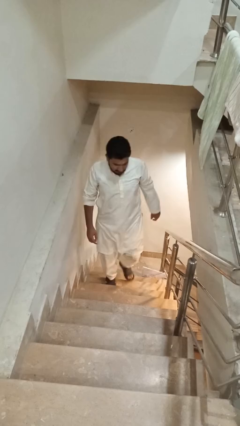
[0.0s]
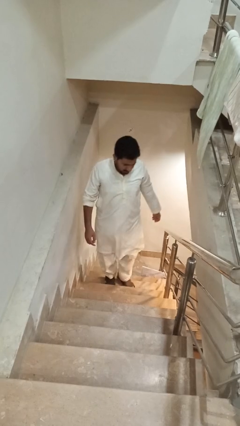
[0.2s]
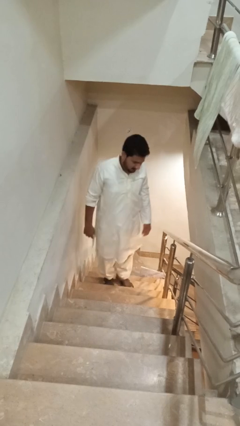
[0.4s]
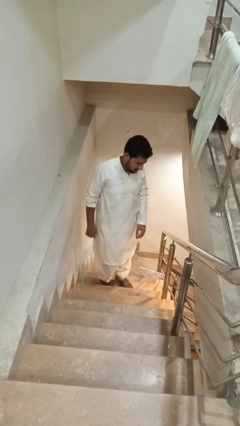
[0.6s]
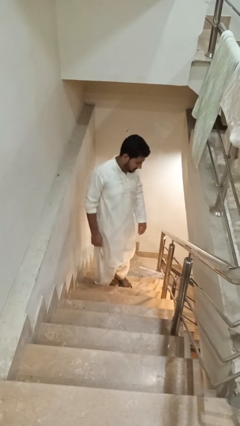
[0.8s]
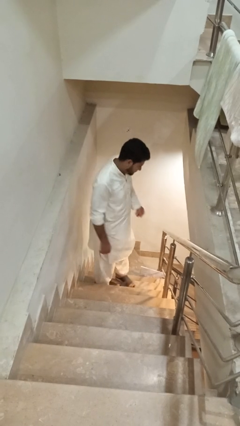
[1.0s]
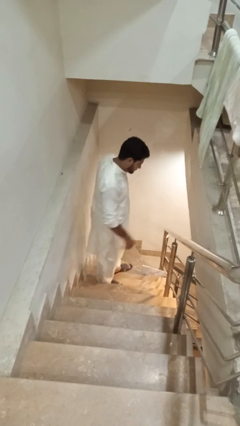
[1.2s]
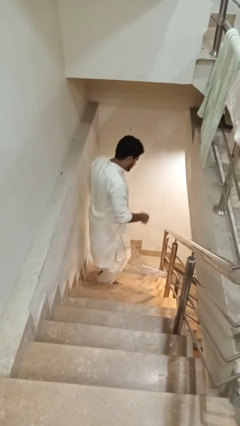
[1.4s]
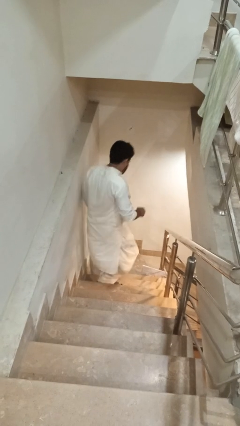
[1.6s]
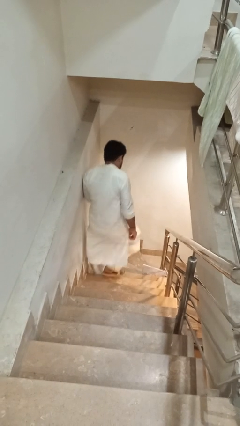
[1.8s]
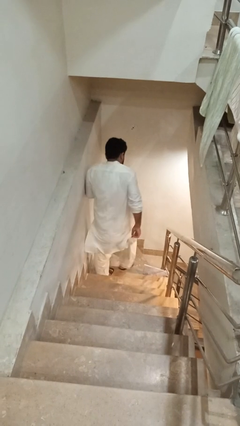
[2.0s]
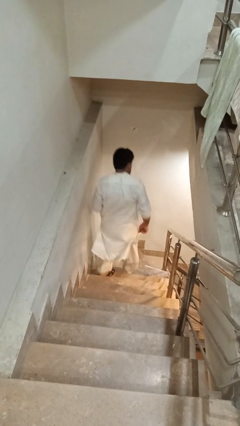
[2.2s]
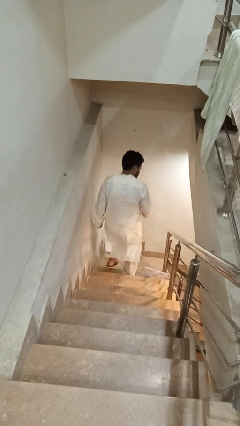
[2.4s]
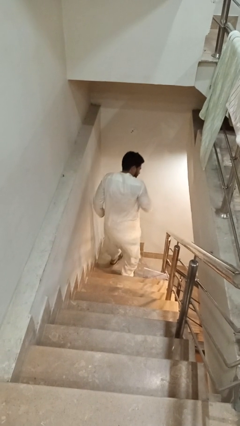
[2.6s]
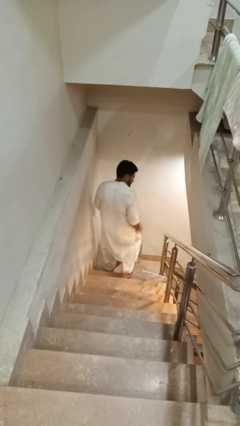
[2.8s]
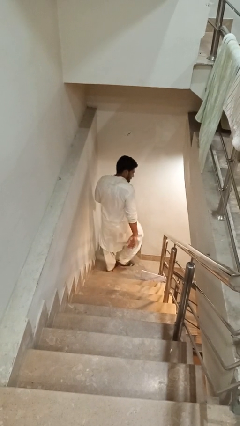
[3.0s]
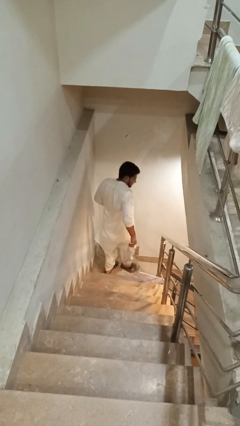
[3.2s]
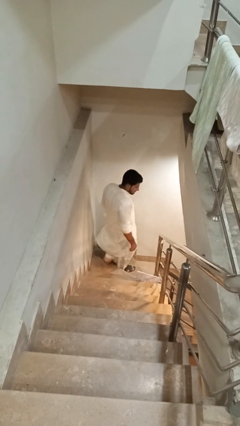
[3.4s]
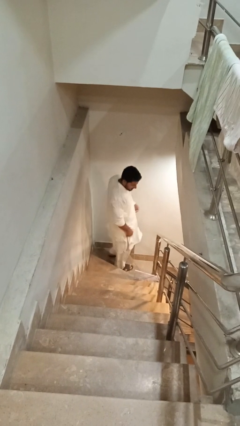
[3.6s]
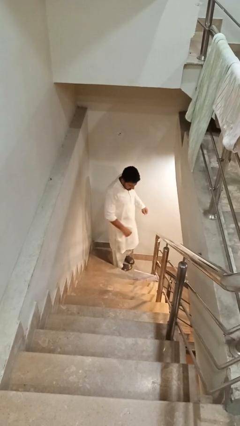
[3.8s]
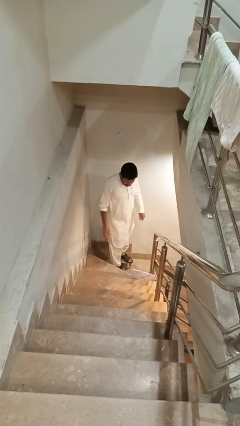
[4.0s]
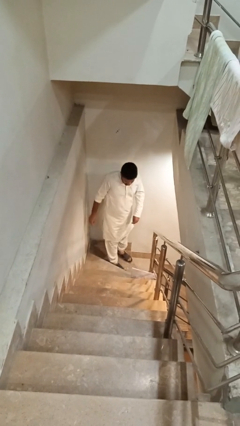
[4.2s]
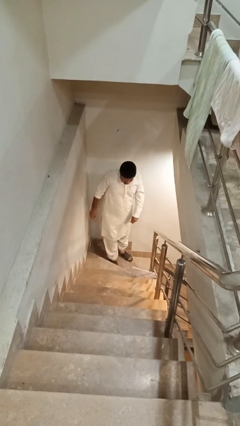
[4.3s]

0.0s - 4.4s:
person climbs down stairs

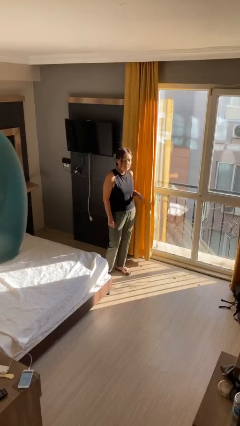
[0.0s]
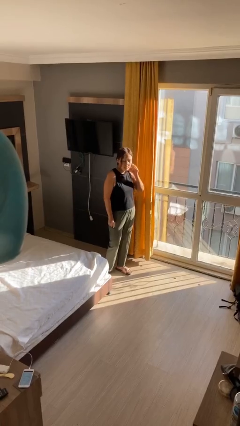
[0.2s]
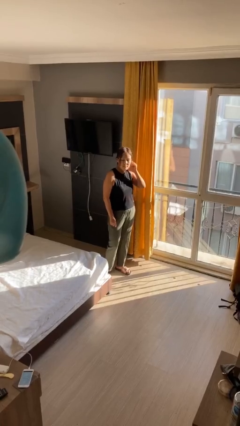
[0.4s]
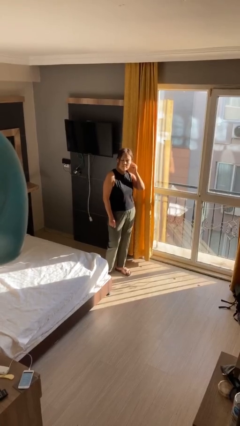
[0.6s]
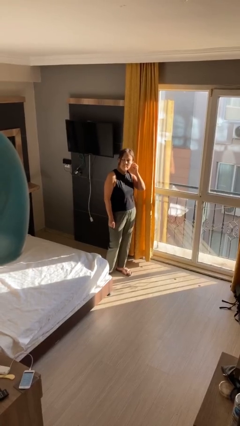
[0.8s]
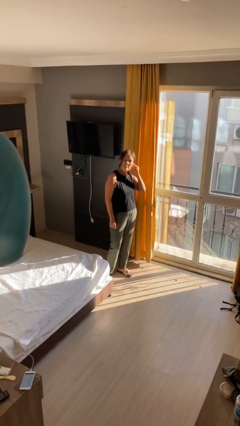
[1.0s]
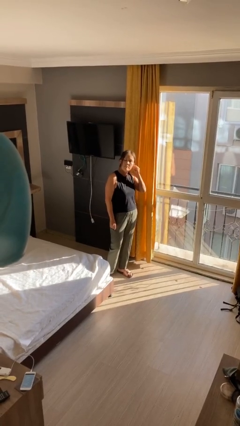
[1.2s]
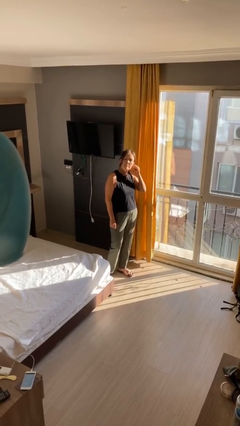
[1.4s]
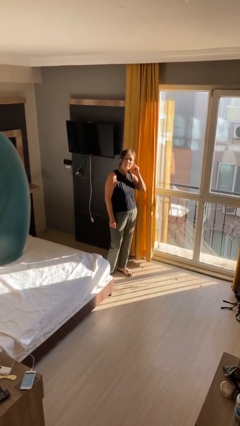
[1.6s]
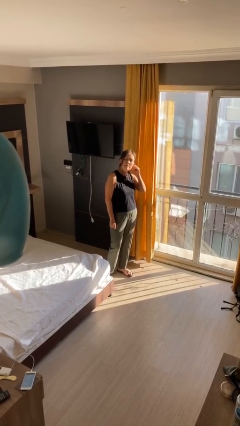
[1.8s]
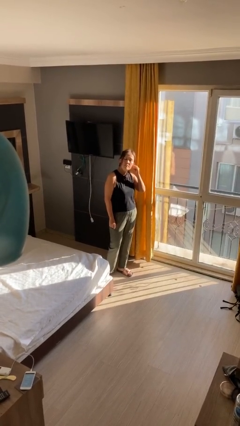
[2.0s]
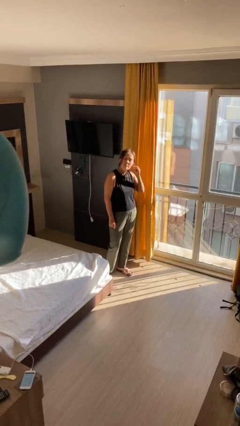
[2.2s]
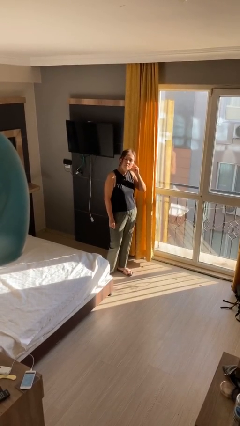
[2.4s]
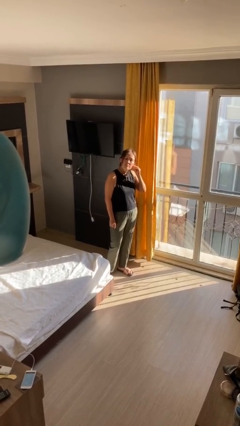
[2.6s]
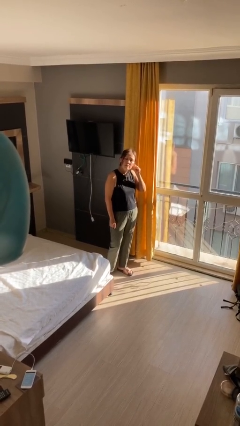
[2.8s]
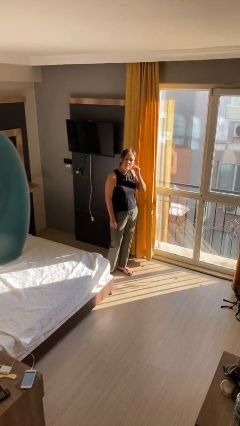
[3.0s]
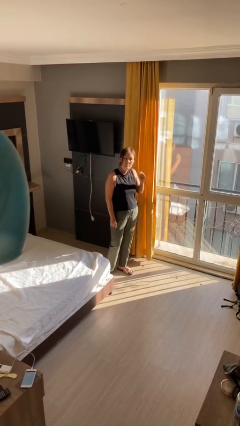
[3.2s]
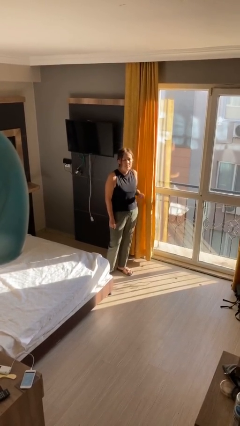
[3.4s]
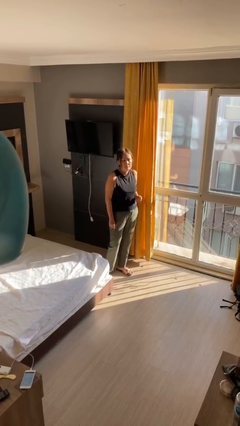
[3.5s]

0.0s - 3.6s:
person touches earlobe

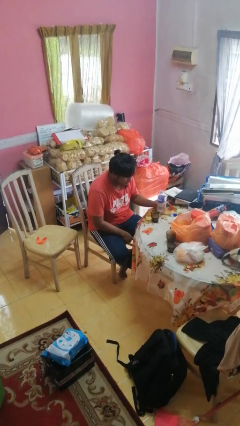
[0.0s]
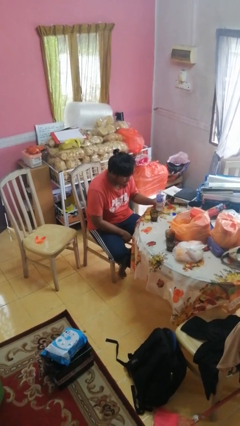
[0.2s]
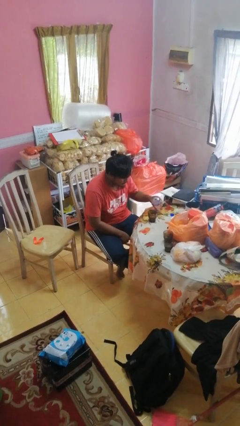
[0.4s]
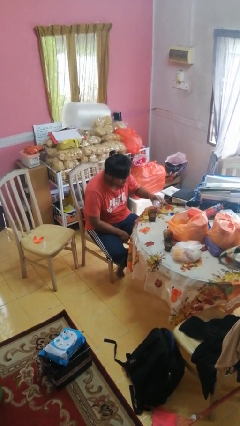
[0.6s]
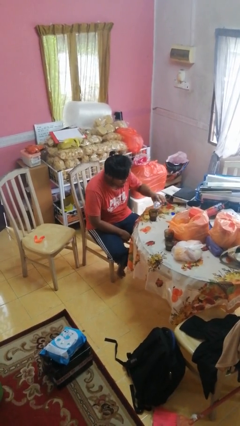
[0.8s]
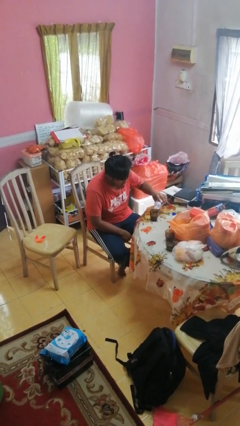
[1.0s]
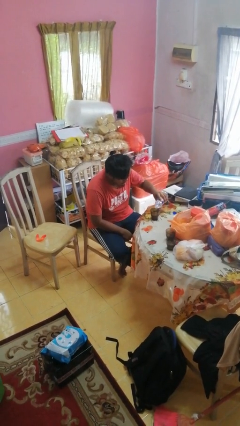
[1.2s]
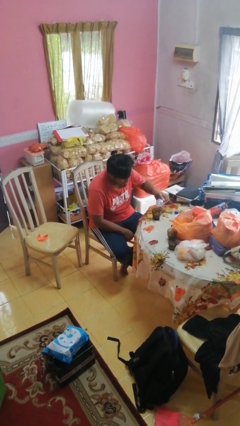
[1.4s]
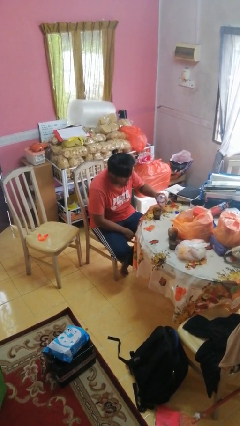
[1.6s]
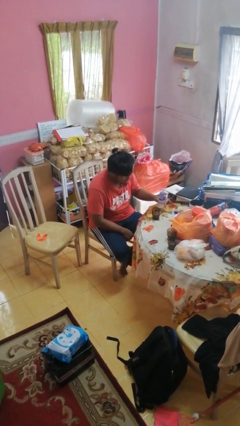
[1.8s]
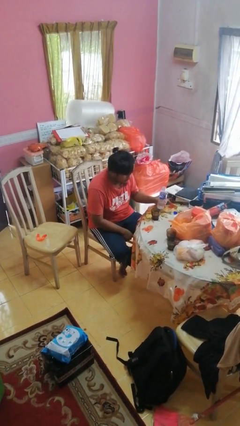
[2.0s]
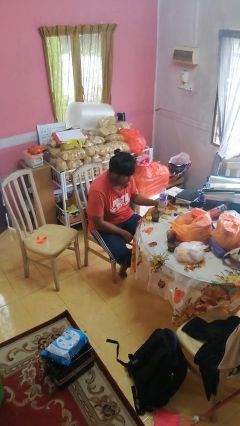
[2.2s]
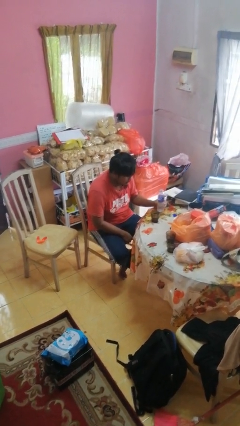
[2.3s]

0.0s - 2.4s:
person pours liquid into cup

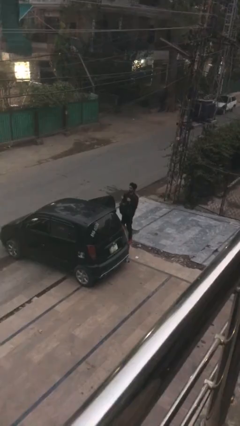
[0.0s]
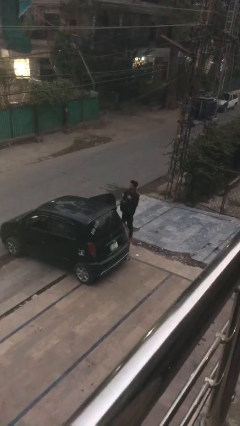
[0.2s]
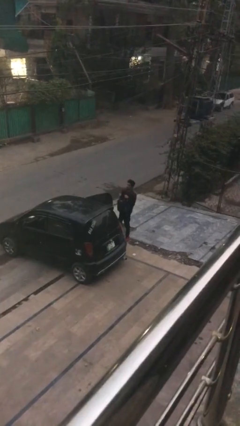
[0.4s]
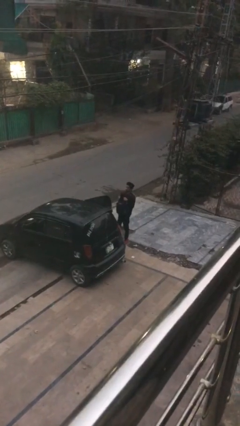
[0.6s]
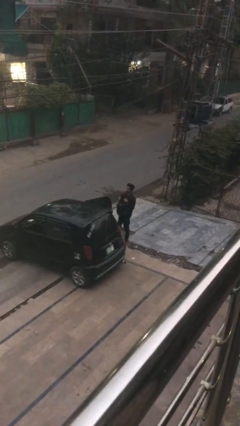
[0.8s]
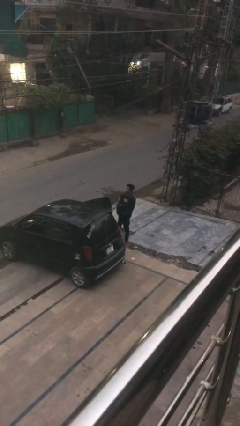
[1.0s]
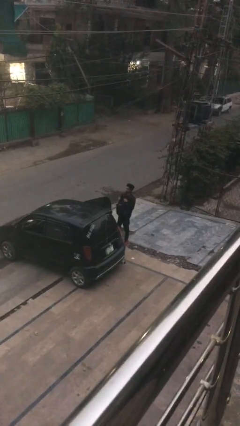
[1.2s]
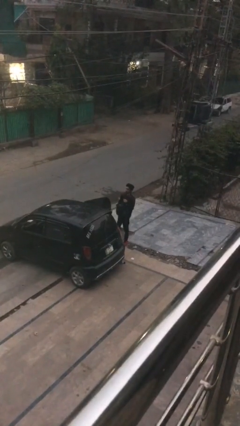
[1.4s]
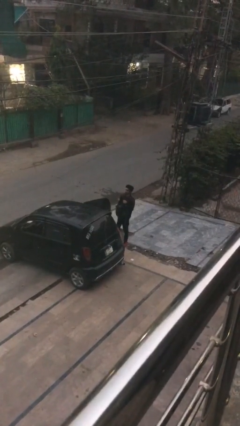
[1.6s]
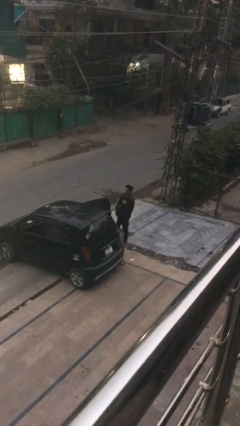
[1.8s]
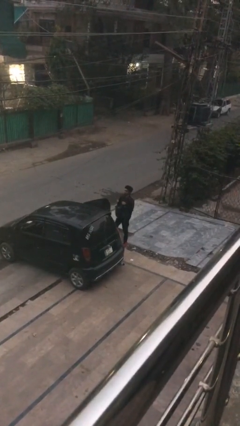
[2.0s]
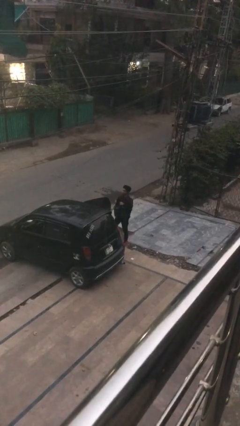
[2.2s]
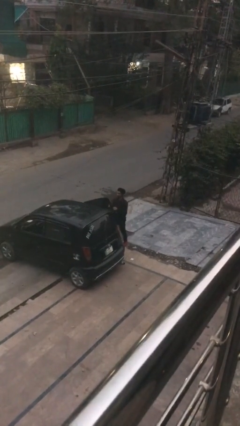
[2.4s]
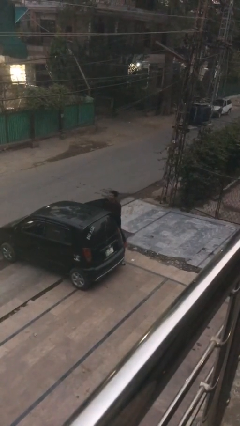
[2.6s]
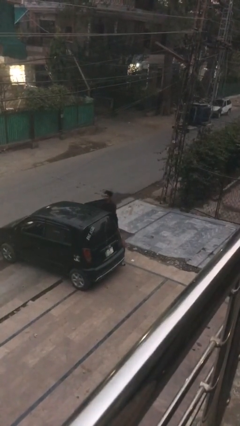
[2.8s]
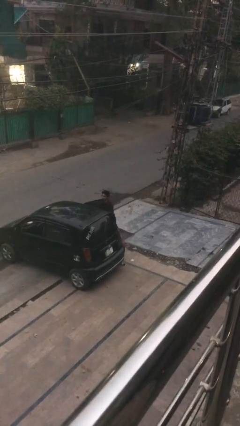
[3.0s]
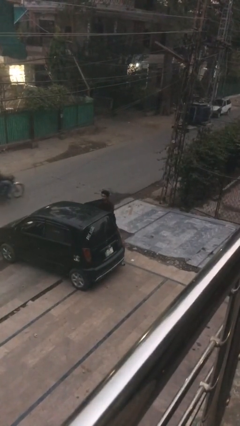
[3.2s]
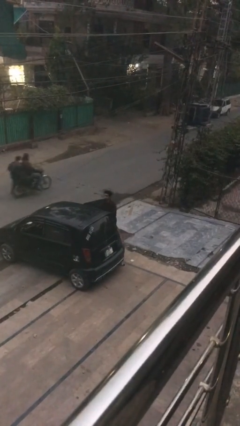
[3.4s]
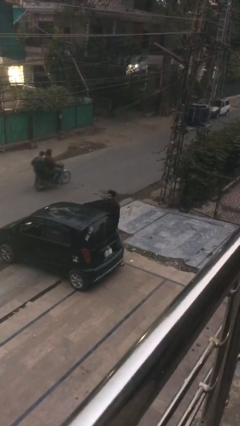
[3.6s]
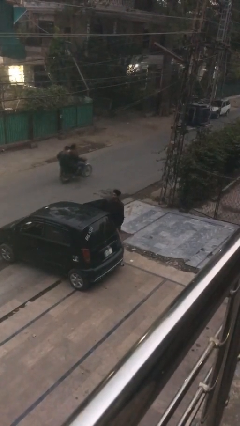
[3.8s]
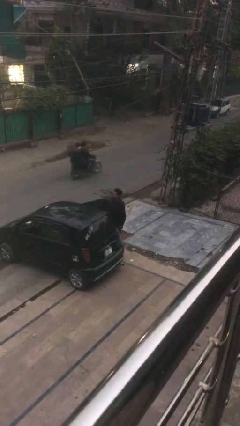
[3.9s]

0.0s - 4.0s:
person loads car

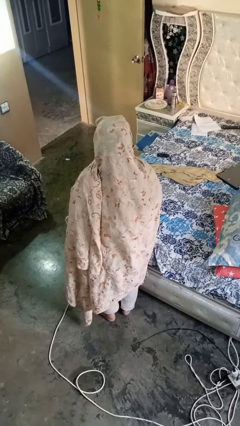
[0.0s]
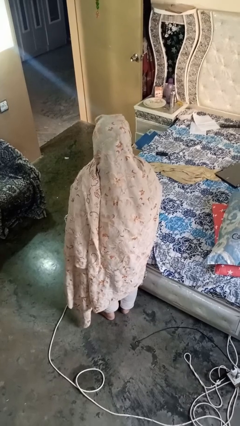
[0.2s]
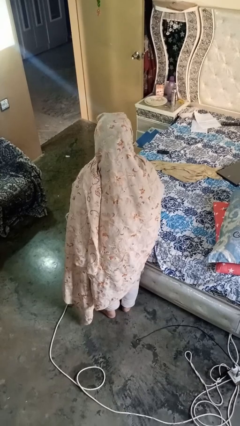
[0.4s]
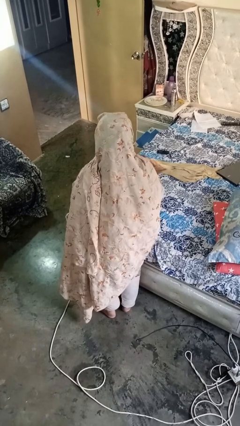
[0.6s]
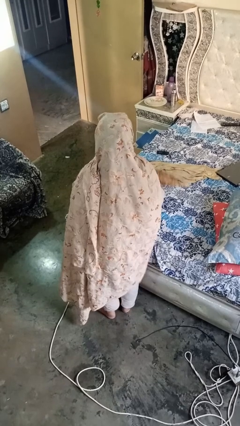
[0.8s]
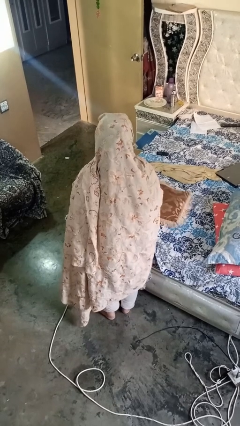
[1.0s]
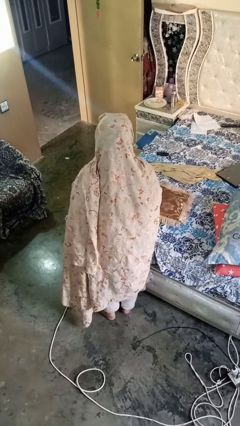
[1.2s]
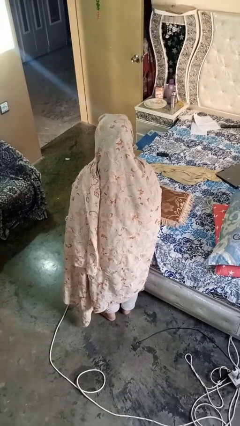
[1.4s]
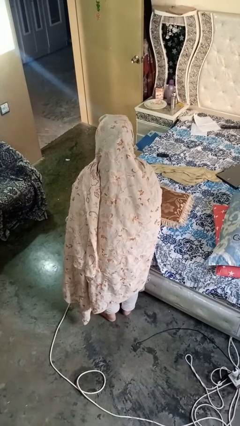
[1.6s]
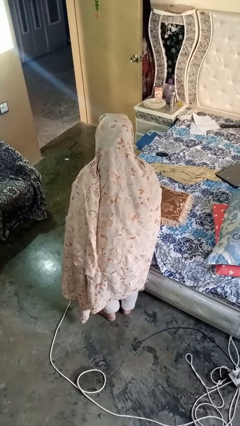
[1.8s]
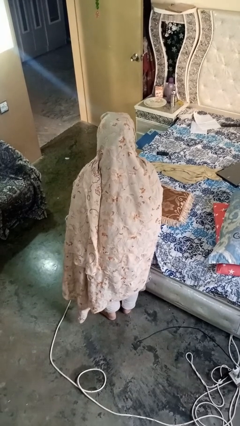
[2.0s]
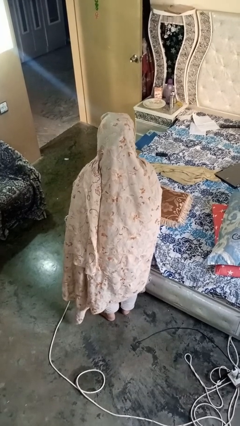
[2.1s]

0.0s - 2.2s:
person puts down object on bed

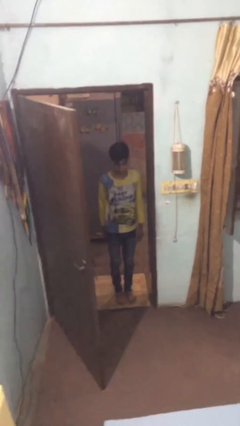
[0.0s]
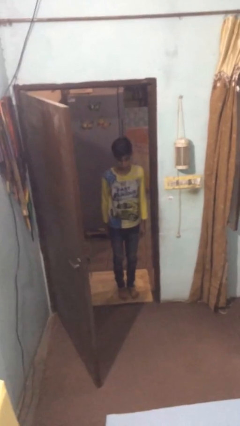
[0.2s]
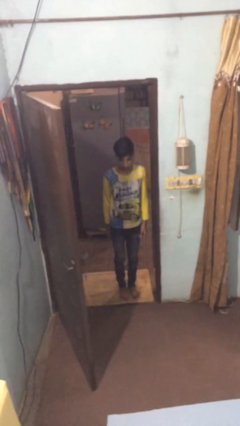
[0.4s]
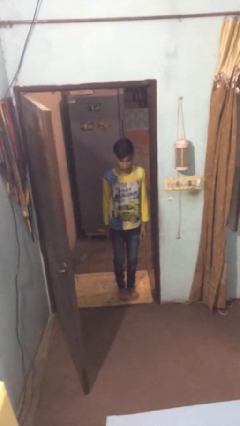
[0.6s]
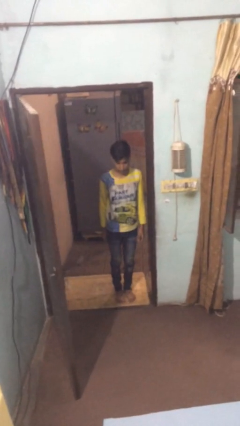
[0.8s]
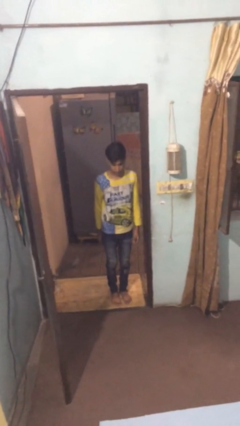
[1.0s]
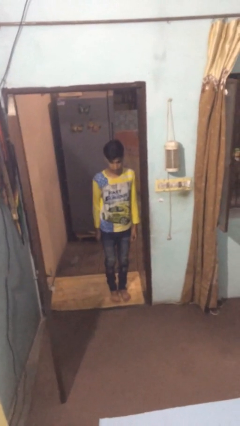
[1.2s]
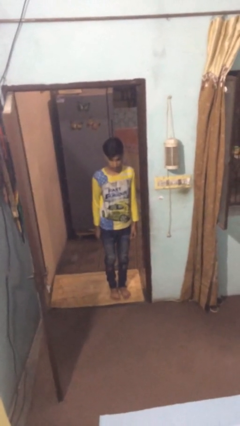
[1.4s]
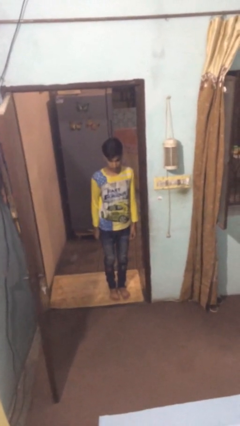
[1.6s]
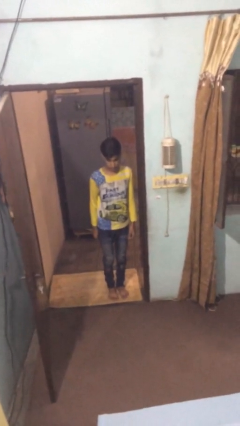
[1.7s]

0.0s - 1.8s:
person opens facility door
